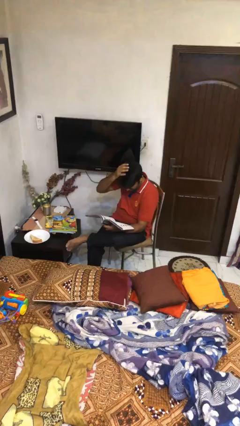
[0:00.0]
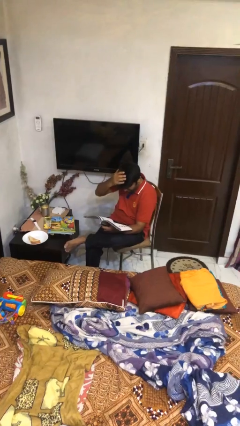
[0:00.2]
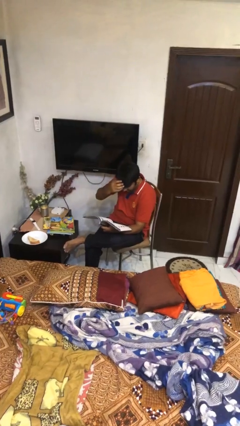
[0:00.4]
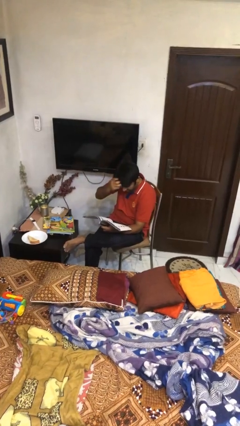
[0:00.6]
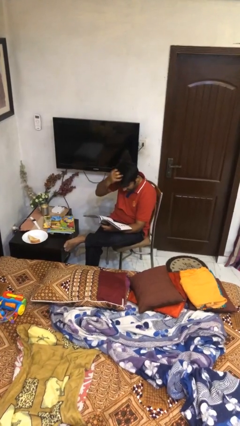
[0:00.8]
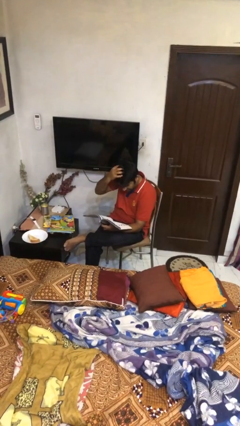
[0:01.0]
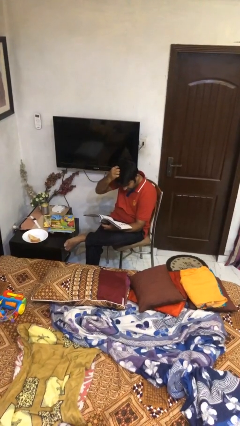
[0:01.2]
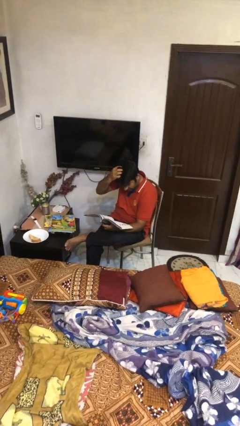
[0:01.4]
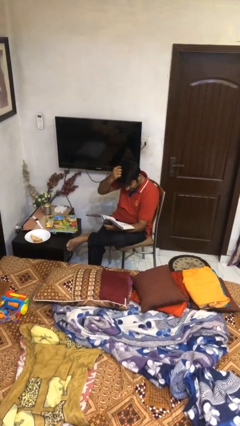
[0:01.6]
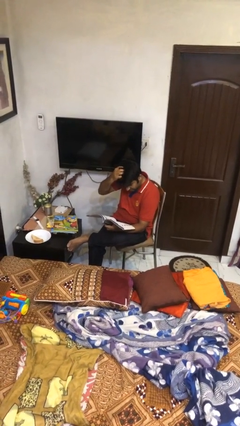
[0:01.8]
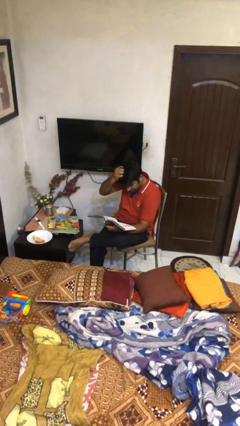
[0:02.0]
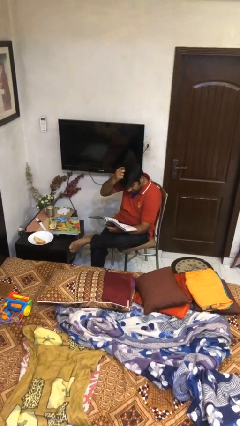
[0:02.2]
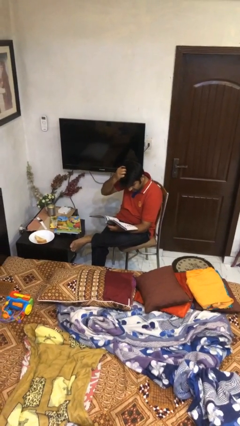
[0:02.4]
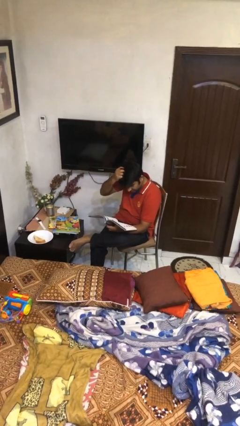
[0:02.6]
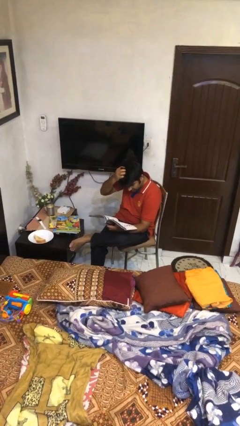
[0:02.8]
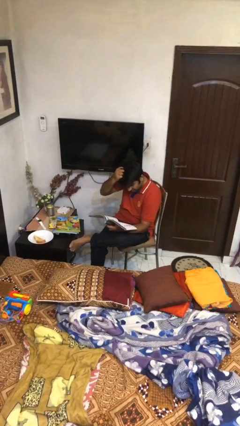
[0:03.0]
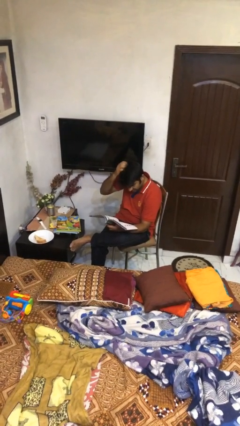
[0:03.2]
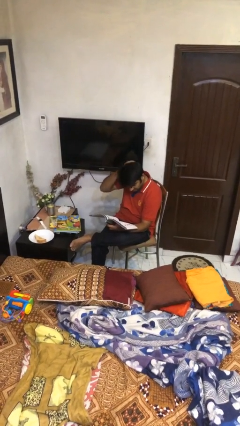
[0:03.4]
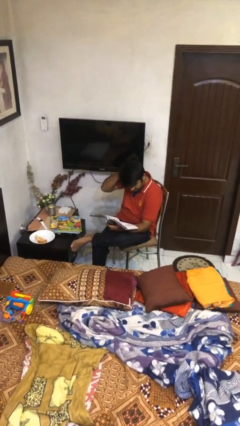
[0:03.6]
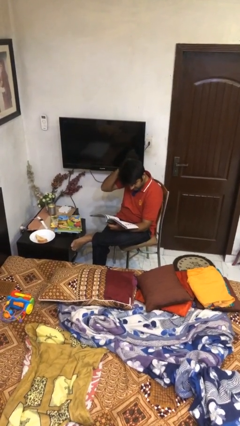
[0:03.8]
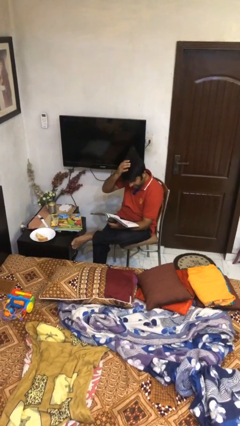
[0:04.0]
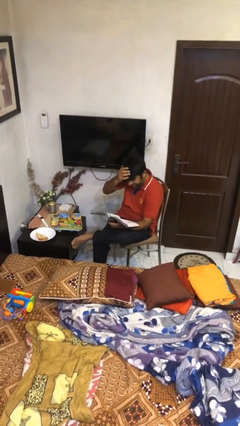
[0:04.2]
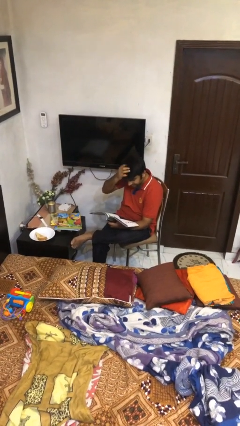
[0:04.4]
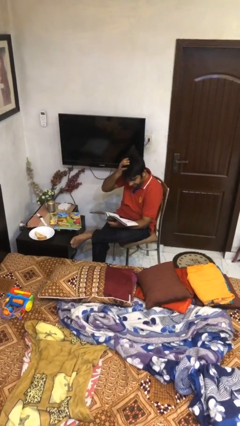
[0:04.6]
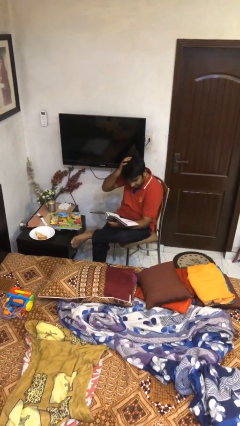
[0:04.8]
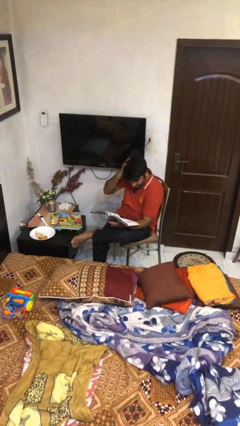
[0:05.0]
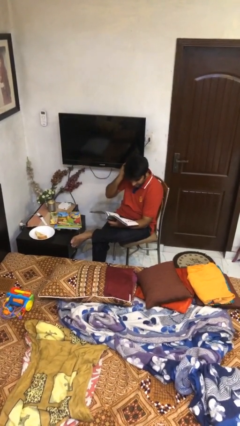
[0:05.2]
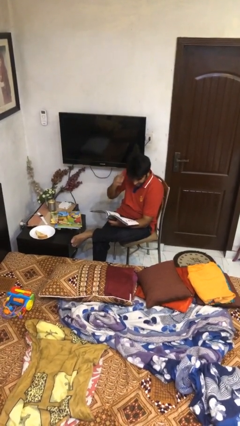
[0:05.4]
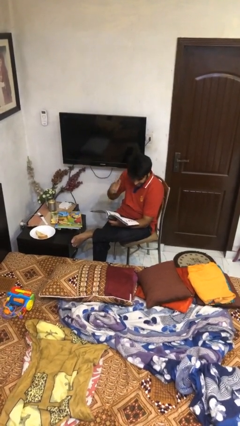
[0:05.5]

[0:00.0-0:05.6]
person reads document

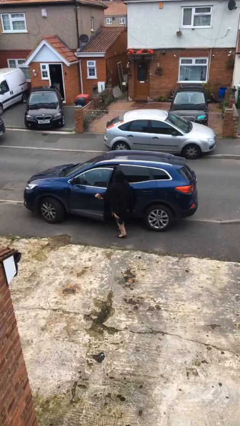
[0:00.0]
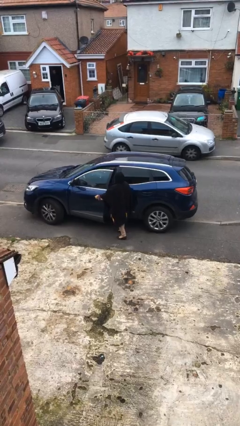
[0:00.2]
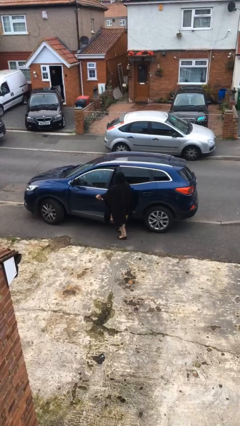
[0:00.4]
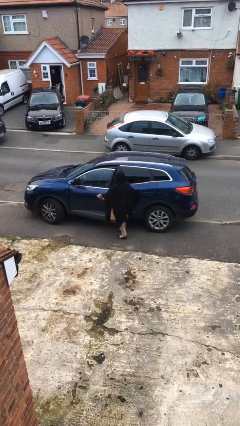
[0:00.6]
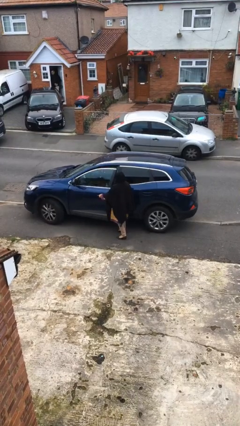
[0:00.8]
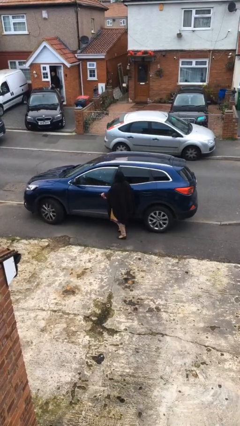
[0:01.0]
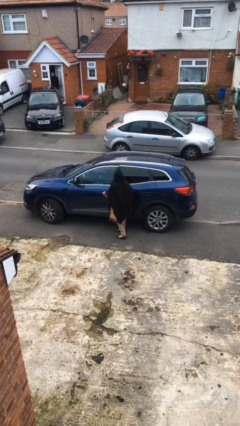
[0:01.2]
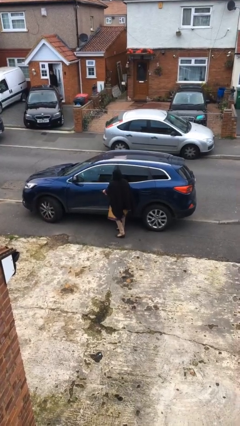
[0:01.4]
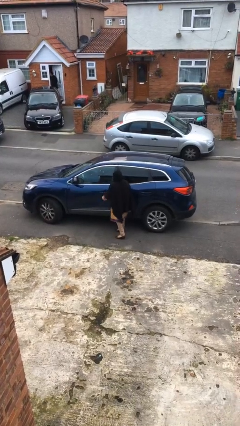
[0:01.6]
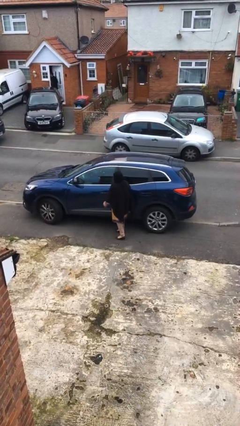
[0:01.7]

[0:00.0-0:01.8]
person closes car door

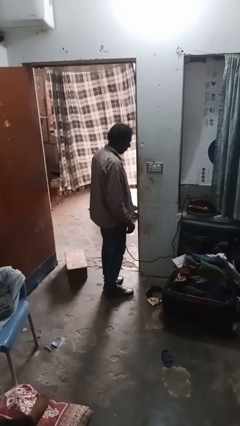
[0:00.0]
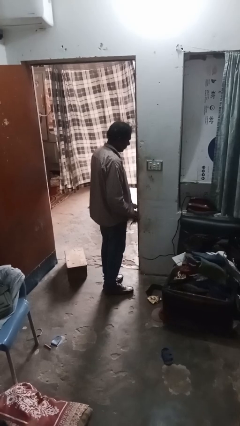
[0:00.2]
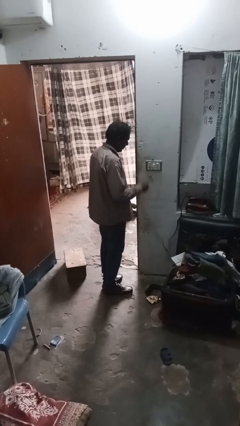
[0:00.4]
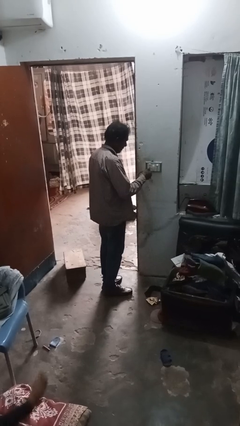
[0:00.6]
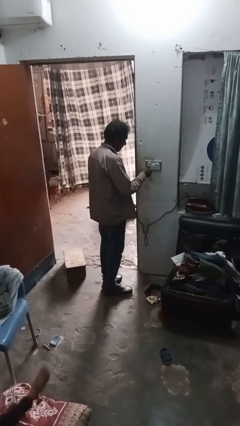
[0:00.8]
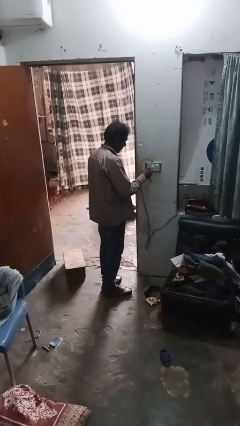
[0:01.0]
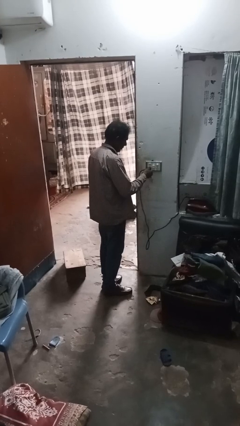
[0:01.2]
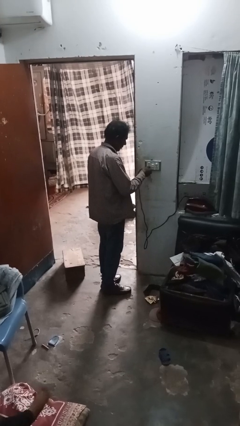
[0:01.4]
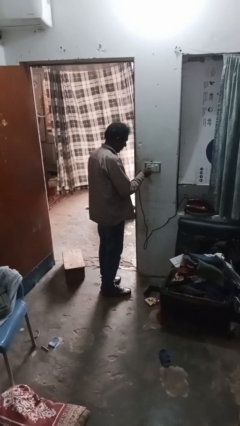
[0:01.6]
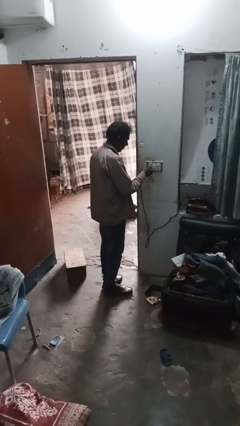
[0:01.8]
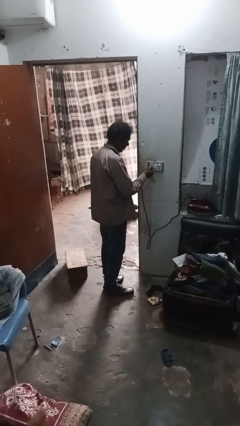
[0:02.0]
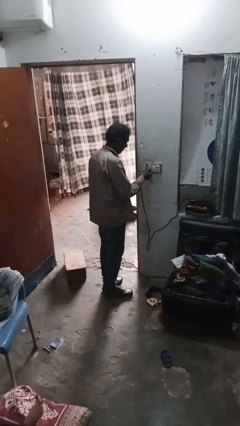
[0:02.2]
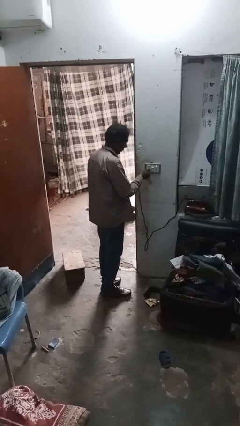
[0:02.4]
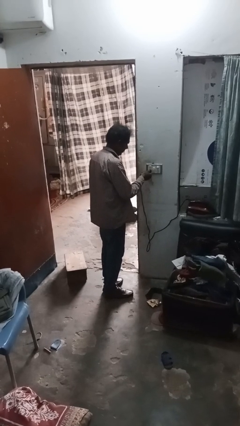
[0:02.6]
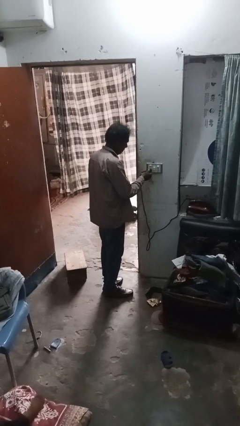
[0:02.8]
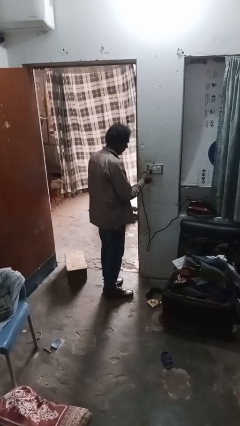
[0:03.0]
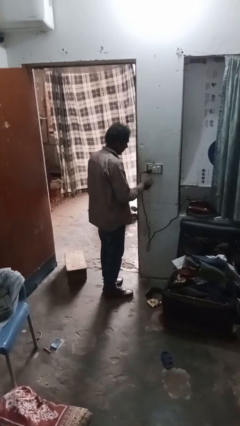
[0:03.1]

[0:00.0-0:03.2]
person plugs into electrical socket

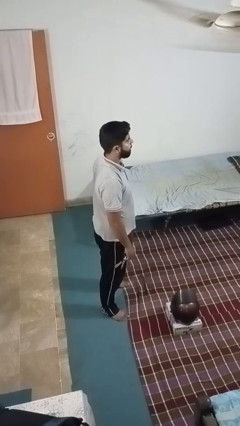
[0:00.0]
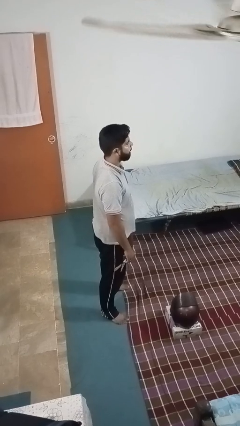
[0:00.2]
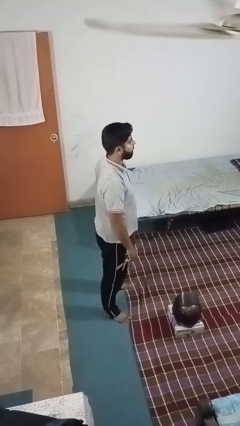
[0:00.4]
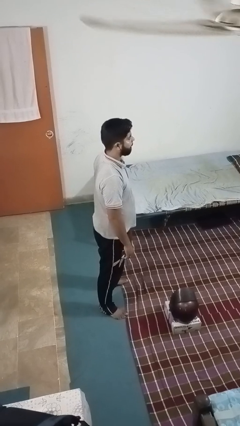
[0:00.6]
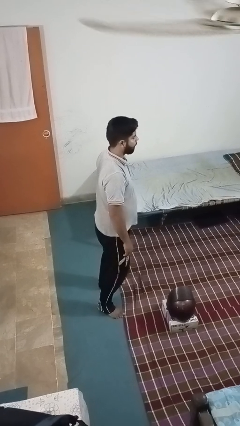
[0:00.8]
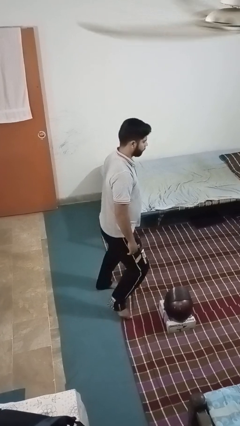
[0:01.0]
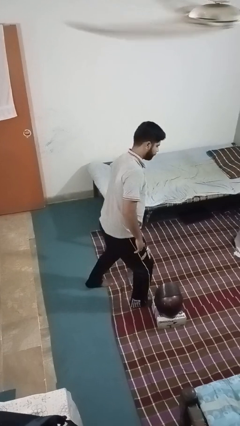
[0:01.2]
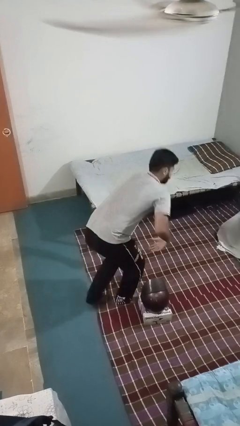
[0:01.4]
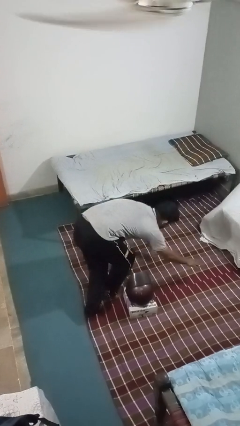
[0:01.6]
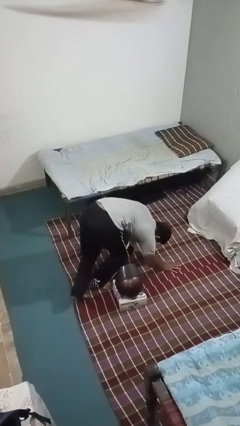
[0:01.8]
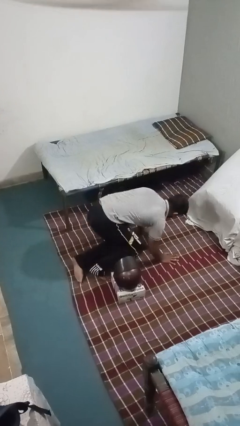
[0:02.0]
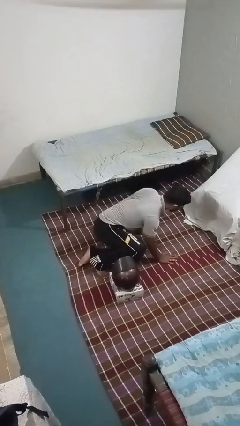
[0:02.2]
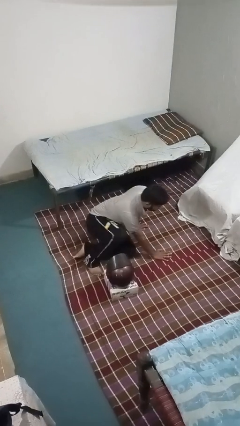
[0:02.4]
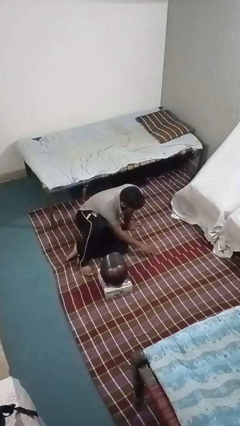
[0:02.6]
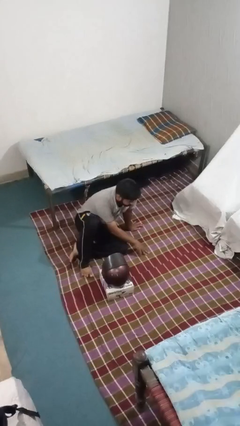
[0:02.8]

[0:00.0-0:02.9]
person trips on object on floor

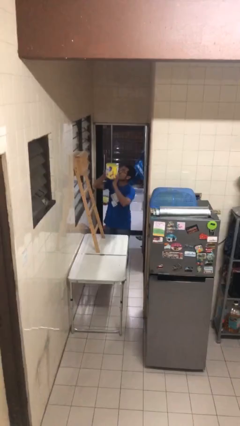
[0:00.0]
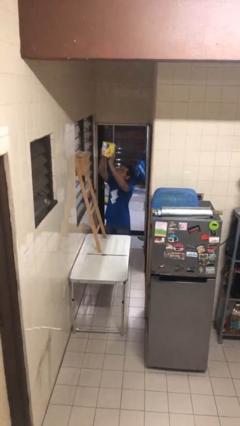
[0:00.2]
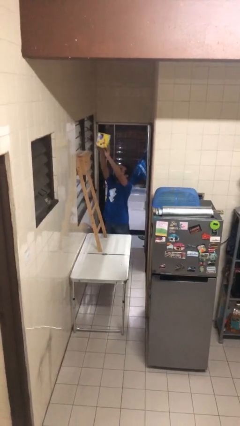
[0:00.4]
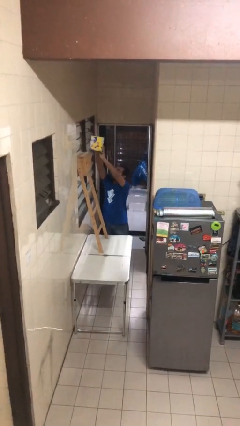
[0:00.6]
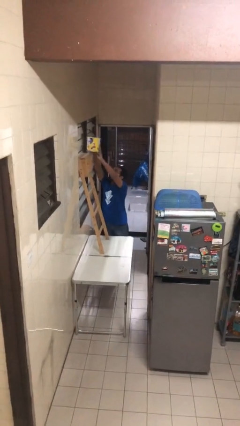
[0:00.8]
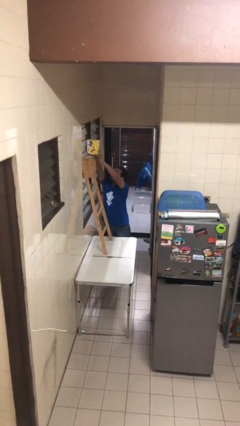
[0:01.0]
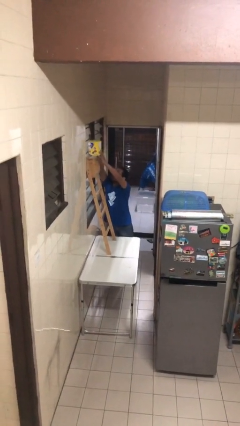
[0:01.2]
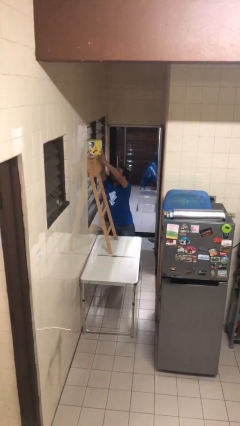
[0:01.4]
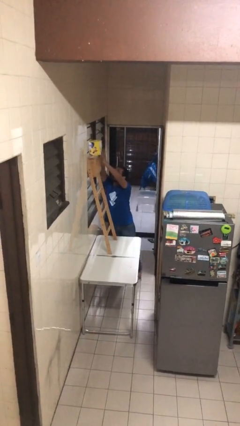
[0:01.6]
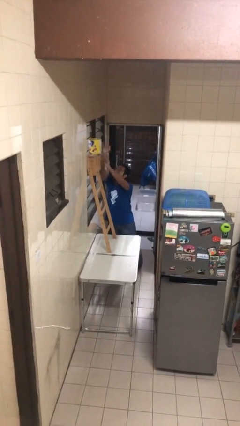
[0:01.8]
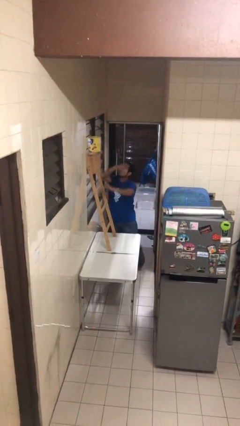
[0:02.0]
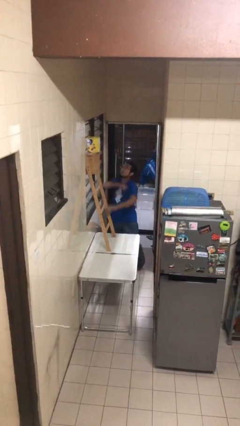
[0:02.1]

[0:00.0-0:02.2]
person puts down object on shelf

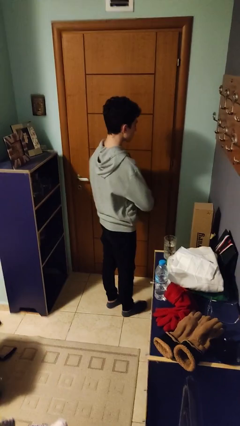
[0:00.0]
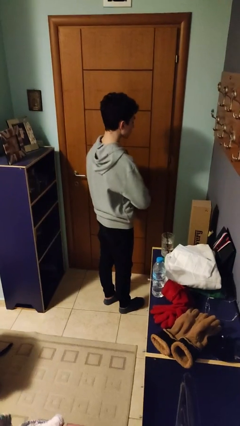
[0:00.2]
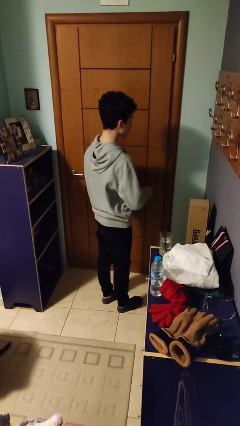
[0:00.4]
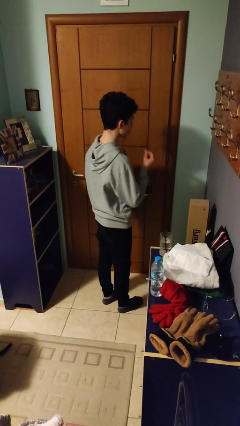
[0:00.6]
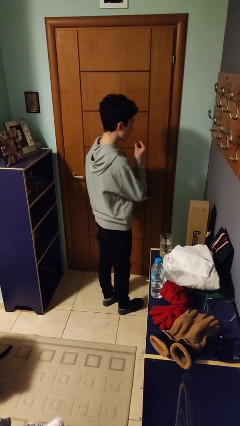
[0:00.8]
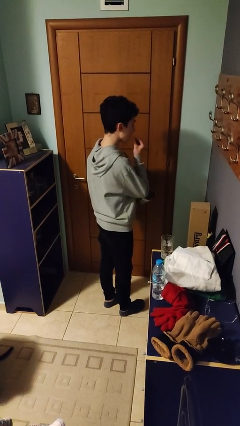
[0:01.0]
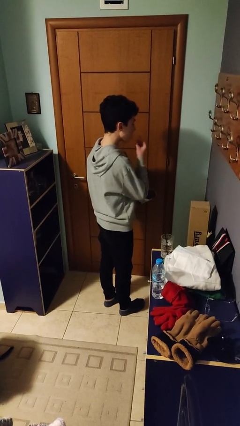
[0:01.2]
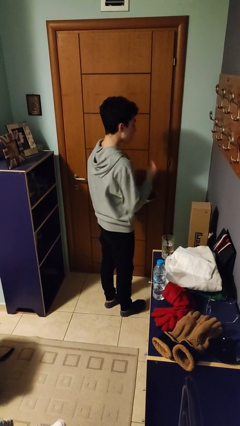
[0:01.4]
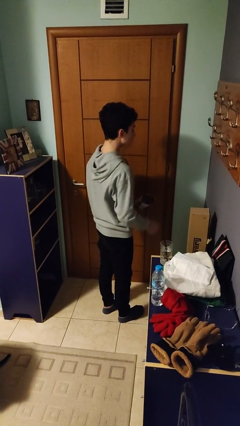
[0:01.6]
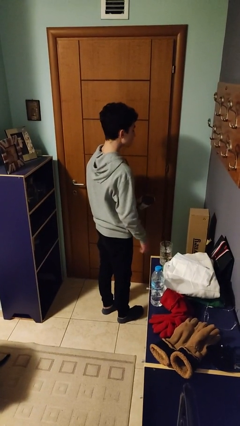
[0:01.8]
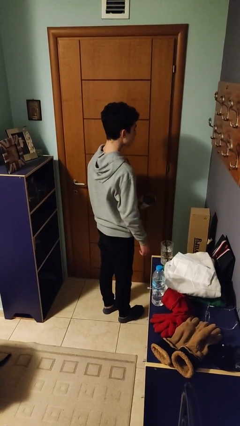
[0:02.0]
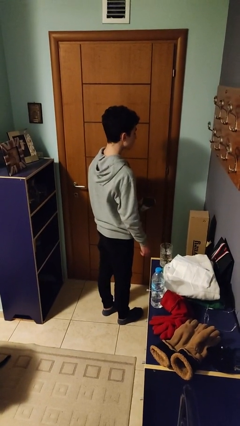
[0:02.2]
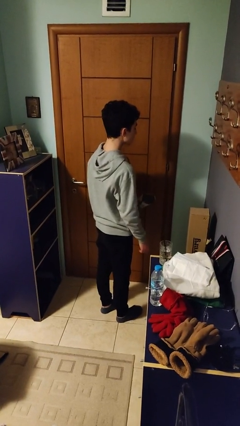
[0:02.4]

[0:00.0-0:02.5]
person eats snack from bag
